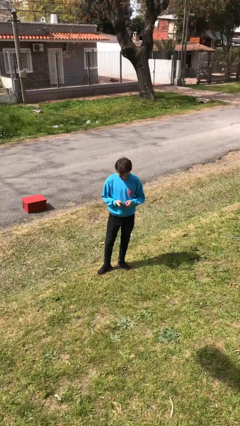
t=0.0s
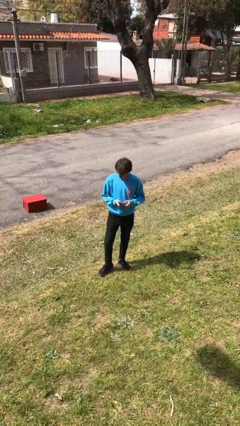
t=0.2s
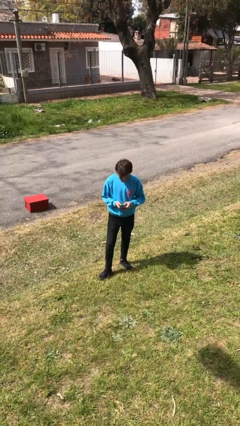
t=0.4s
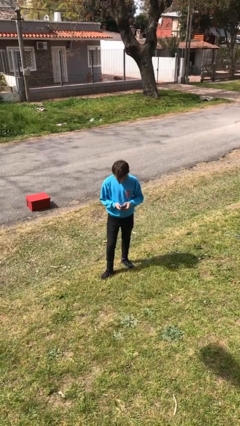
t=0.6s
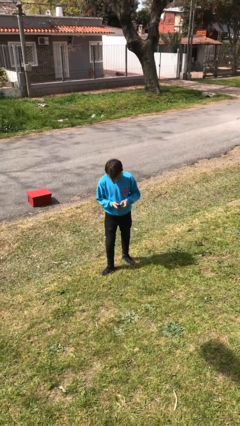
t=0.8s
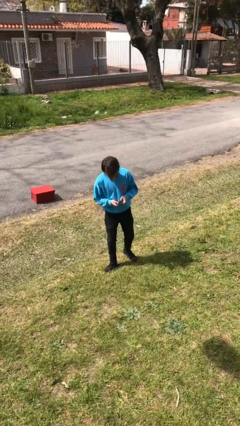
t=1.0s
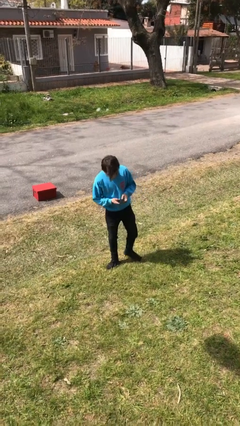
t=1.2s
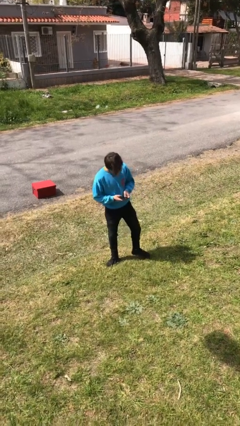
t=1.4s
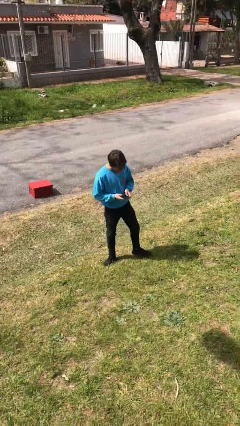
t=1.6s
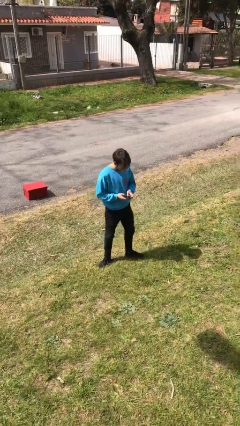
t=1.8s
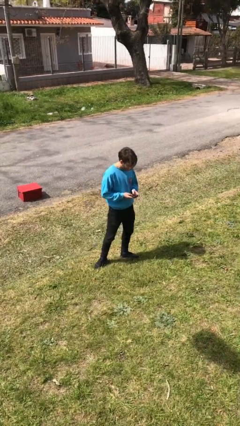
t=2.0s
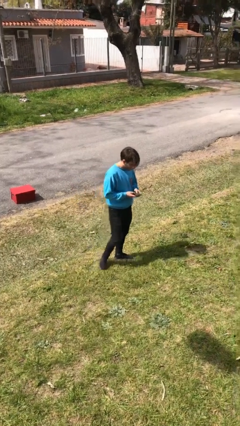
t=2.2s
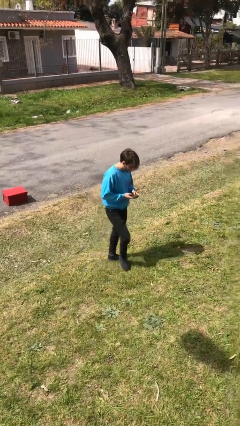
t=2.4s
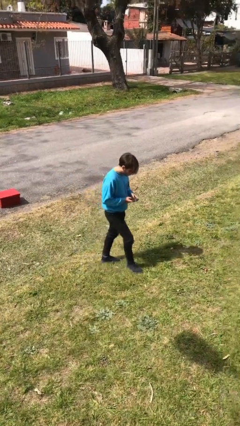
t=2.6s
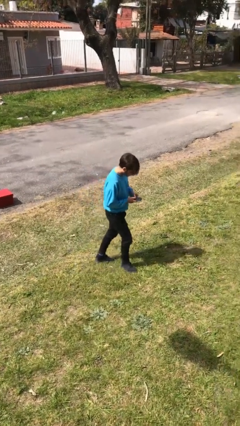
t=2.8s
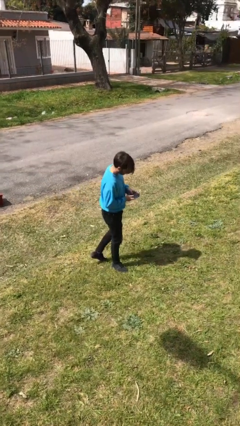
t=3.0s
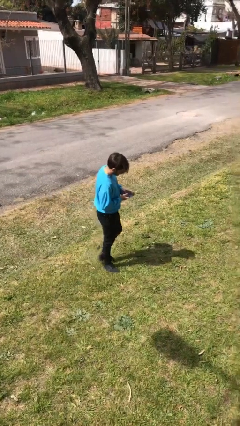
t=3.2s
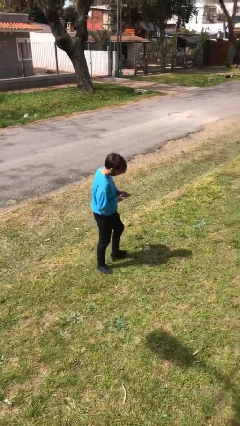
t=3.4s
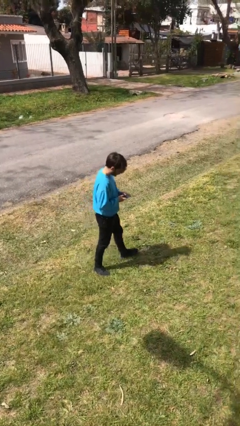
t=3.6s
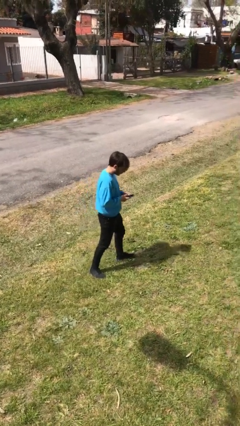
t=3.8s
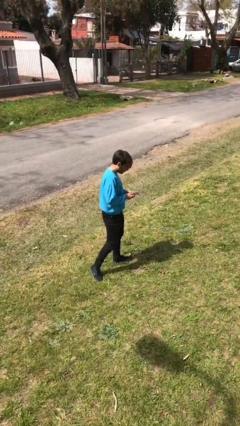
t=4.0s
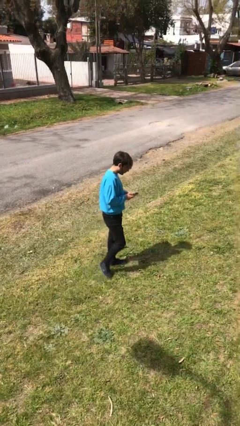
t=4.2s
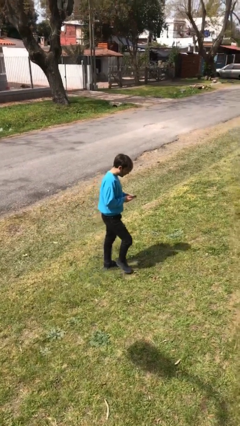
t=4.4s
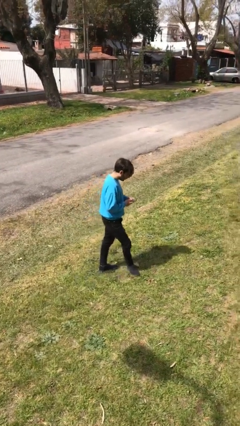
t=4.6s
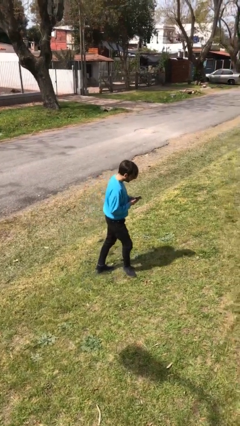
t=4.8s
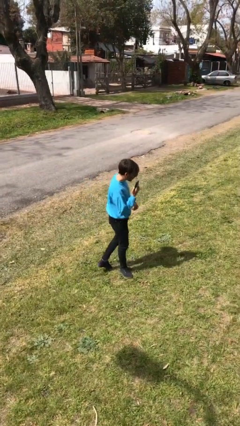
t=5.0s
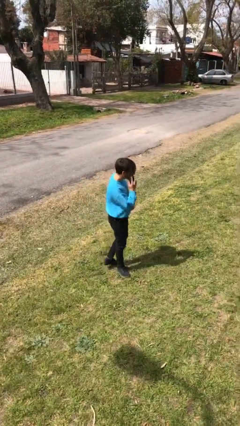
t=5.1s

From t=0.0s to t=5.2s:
person texts on phone

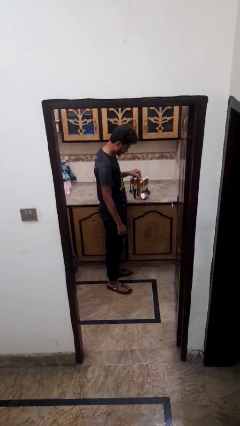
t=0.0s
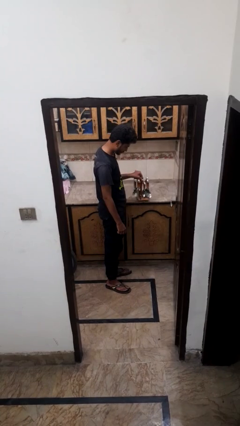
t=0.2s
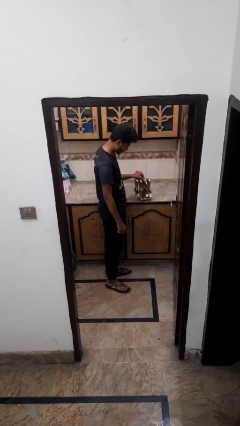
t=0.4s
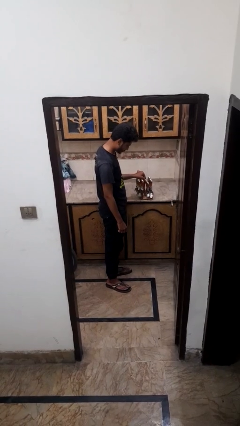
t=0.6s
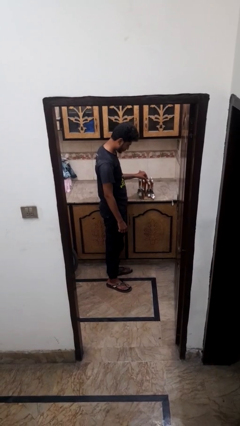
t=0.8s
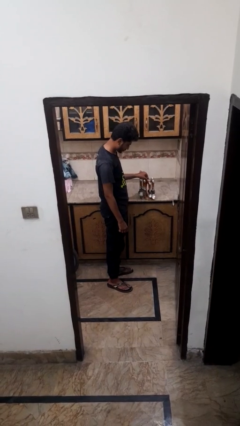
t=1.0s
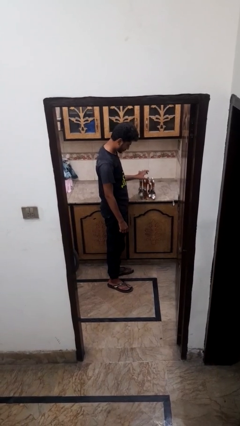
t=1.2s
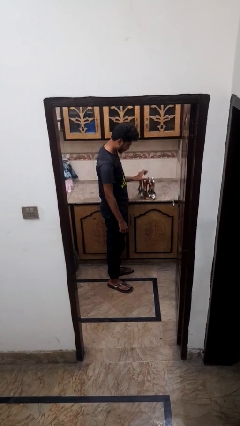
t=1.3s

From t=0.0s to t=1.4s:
person puts down object on countertop

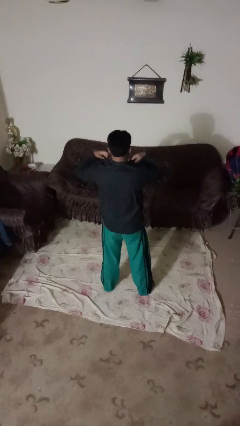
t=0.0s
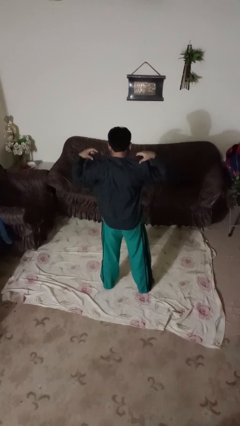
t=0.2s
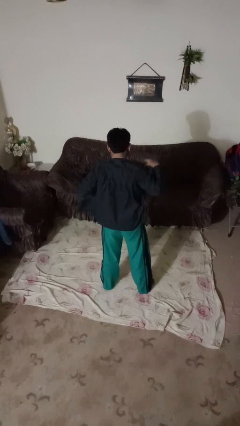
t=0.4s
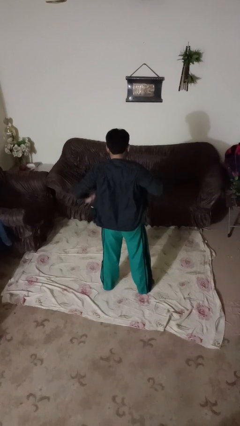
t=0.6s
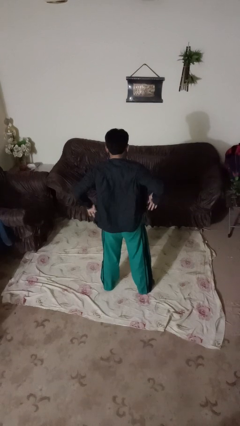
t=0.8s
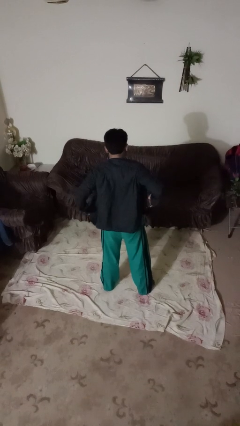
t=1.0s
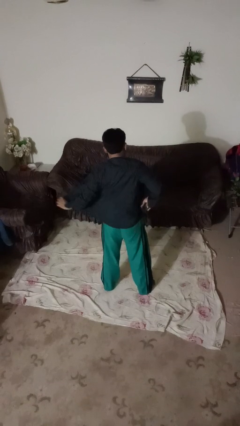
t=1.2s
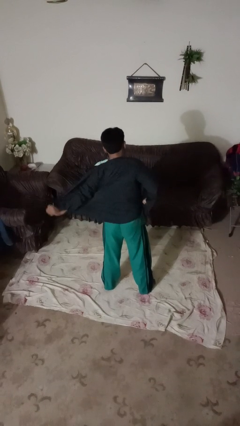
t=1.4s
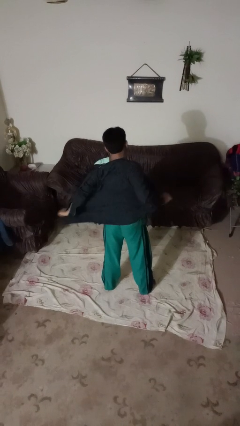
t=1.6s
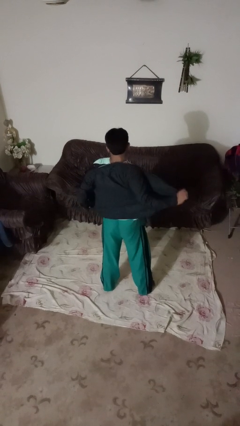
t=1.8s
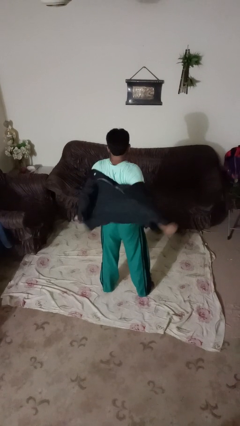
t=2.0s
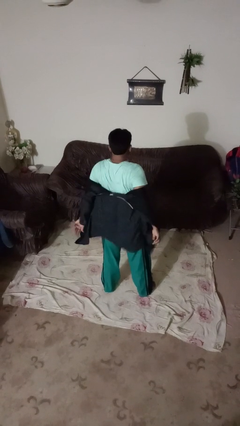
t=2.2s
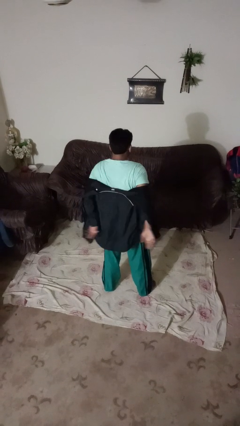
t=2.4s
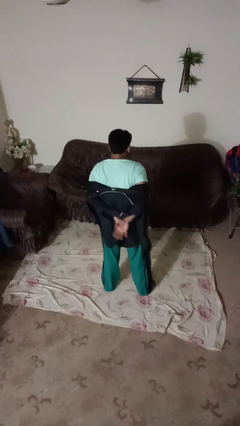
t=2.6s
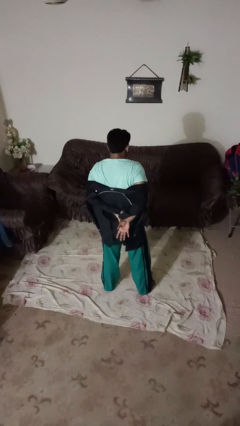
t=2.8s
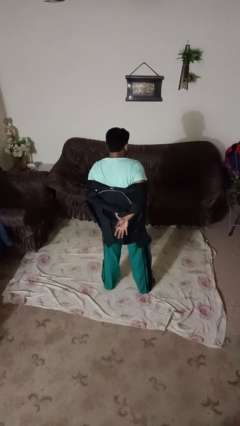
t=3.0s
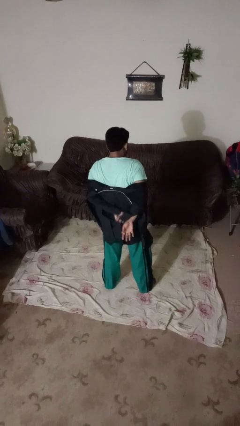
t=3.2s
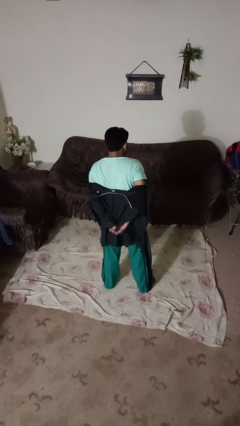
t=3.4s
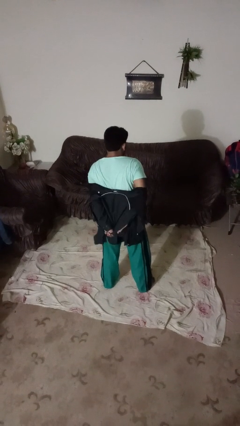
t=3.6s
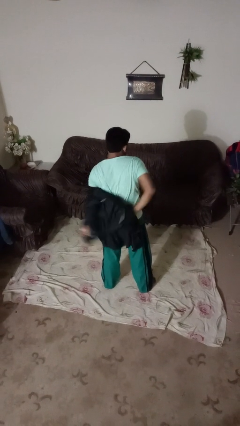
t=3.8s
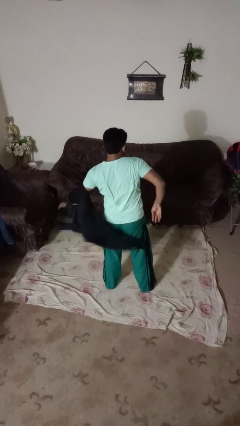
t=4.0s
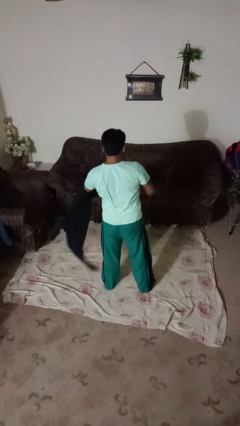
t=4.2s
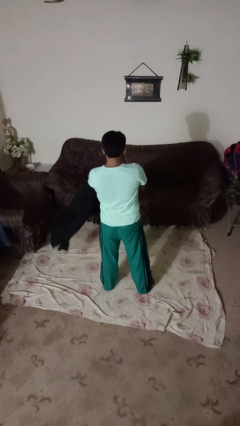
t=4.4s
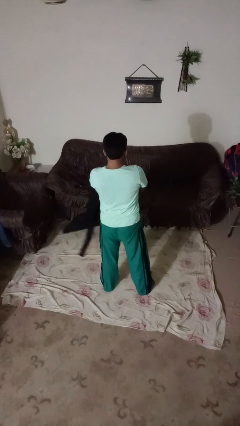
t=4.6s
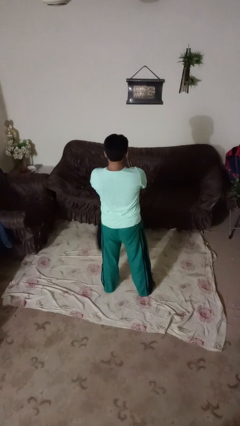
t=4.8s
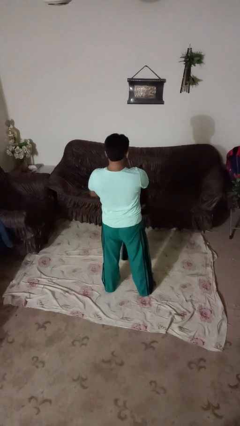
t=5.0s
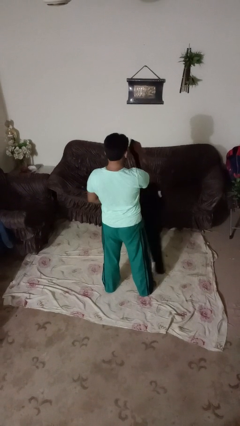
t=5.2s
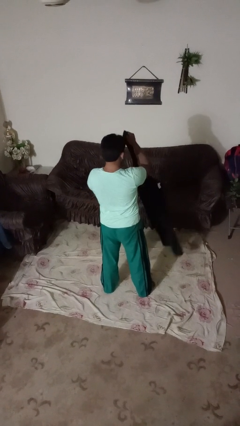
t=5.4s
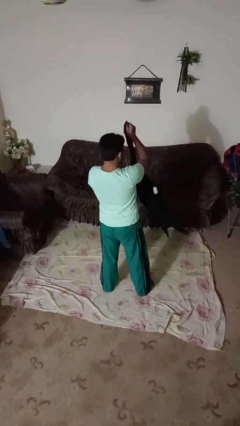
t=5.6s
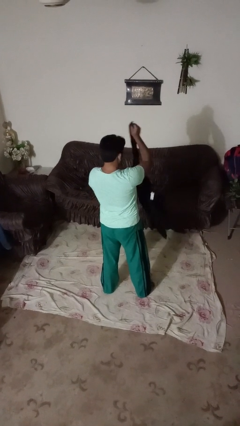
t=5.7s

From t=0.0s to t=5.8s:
person takes off shirt

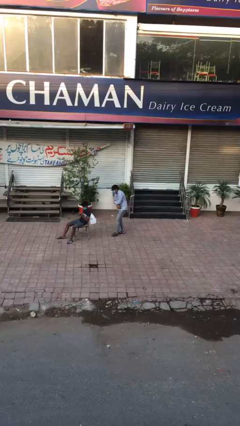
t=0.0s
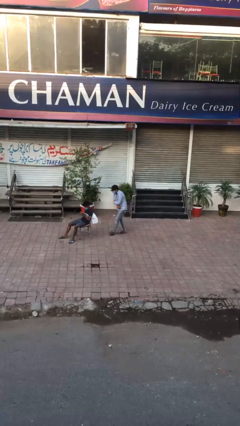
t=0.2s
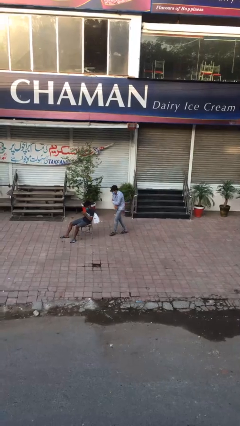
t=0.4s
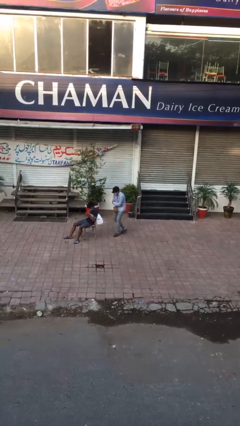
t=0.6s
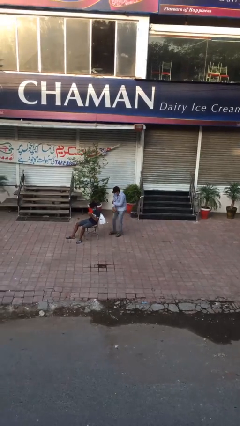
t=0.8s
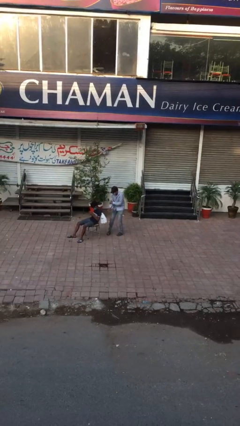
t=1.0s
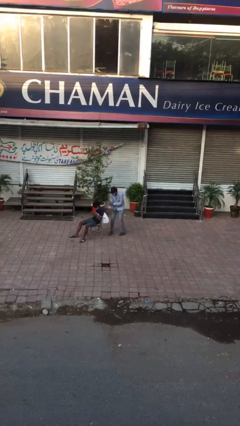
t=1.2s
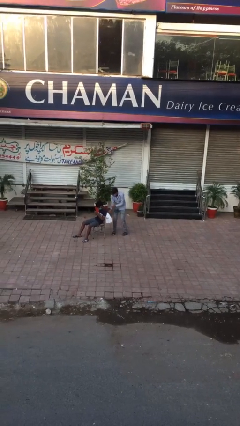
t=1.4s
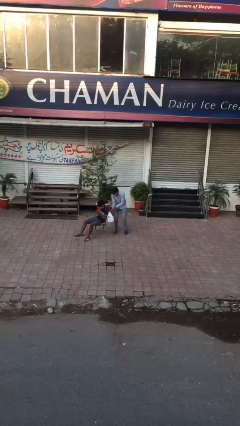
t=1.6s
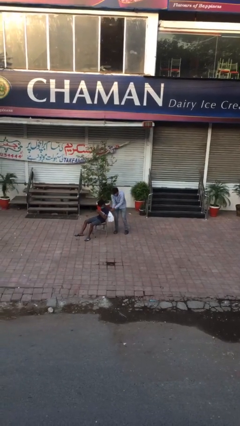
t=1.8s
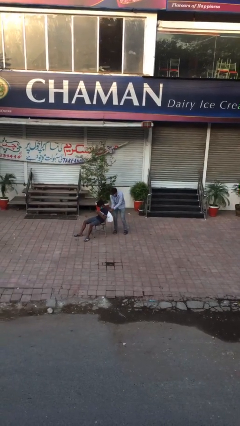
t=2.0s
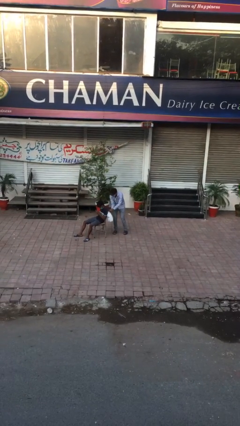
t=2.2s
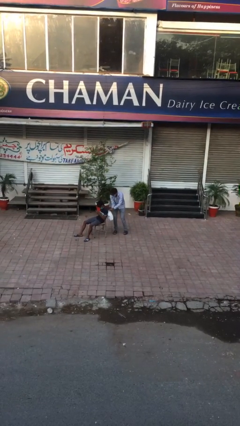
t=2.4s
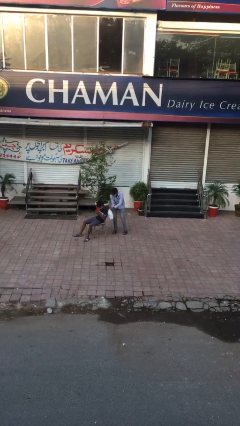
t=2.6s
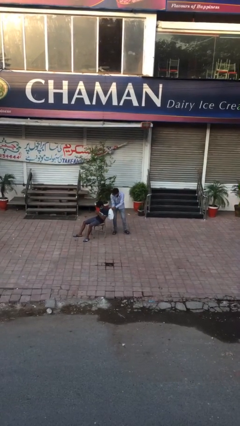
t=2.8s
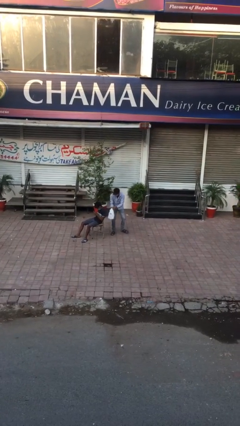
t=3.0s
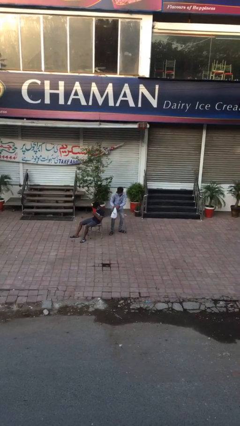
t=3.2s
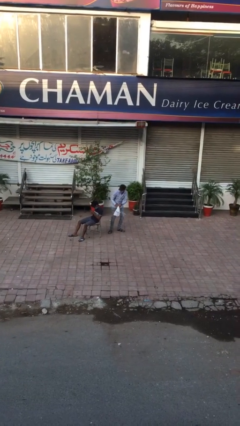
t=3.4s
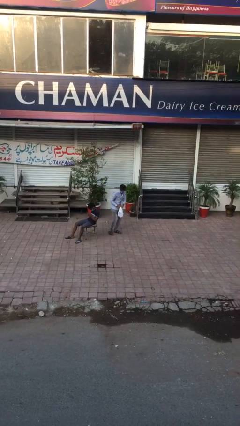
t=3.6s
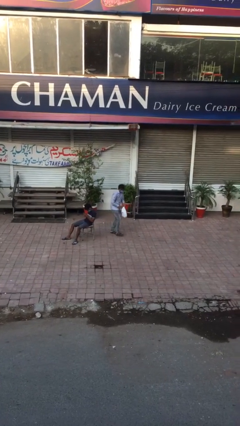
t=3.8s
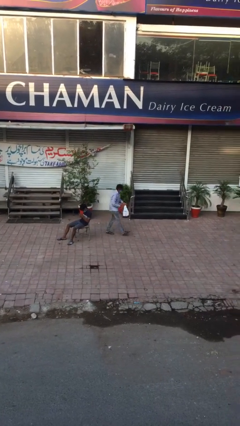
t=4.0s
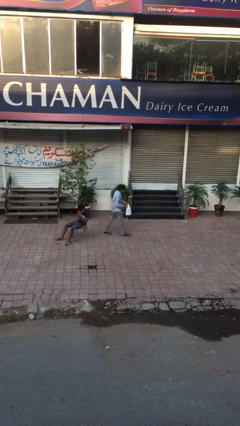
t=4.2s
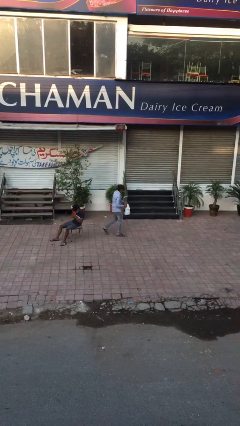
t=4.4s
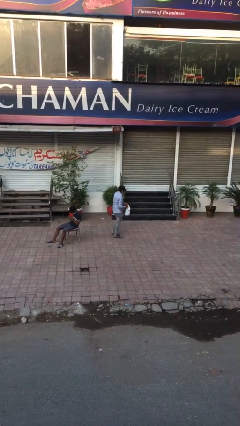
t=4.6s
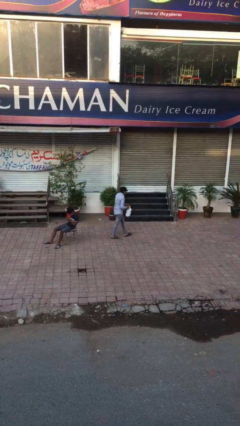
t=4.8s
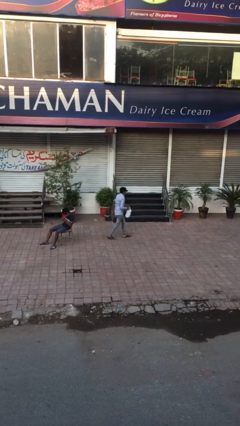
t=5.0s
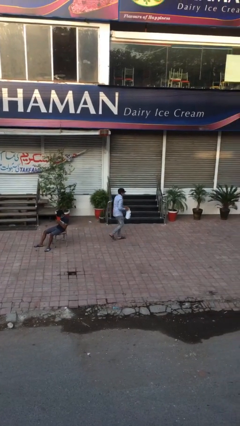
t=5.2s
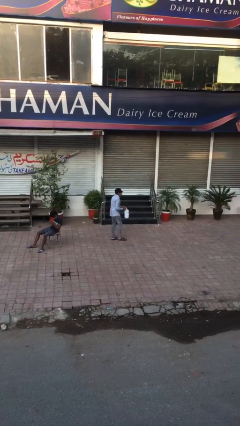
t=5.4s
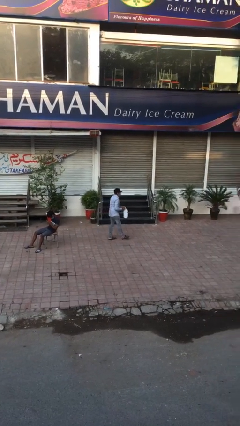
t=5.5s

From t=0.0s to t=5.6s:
person steals object from person
